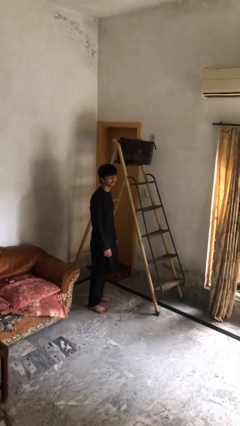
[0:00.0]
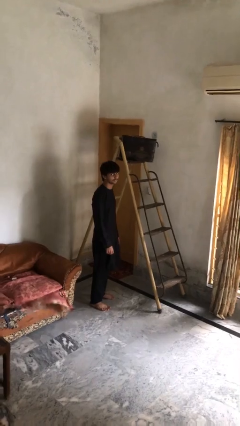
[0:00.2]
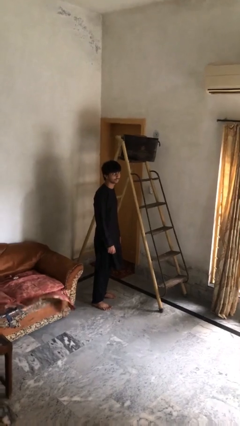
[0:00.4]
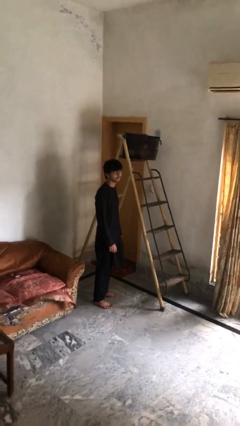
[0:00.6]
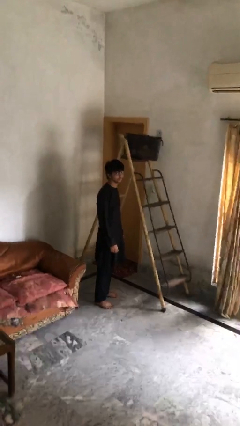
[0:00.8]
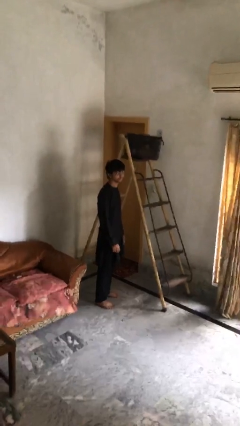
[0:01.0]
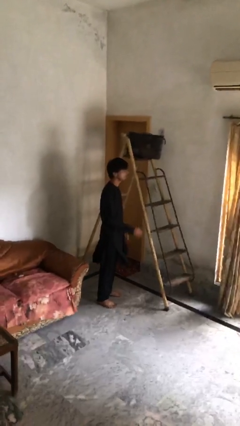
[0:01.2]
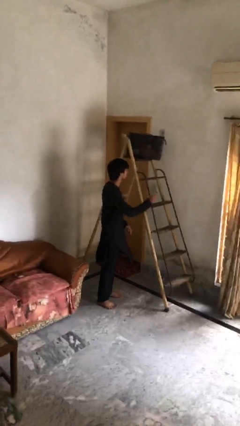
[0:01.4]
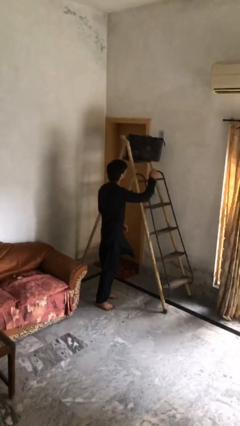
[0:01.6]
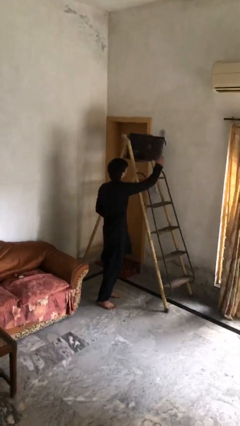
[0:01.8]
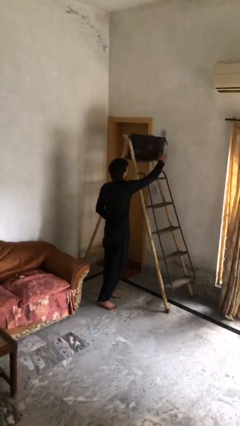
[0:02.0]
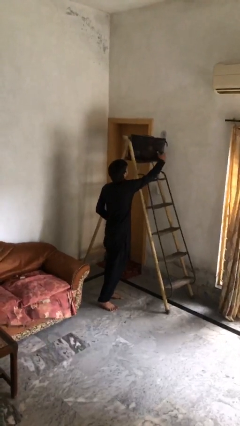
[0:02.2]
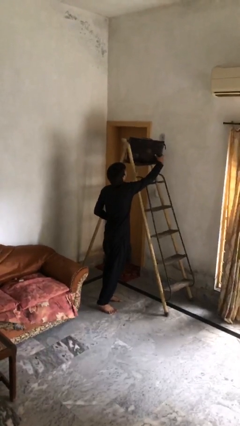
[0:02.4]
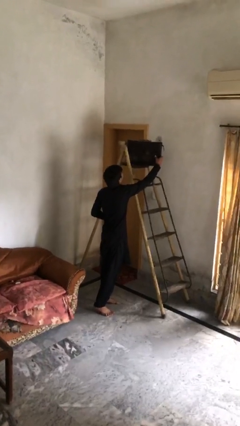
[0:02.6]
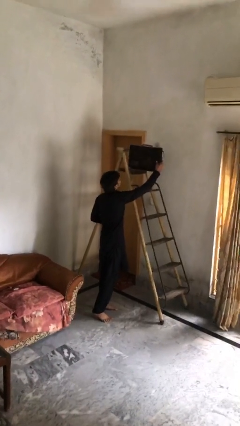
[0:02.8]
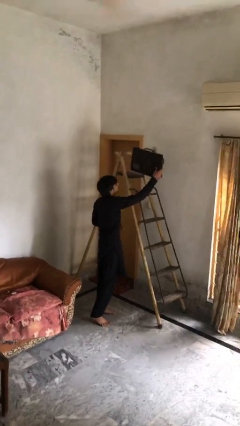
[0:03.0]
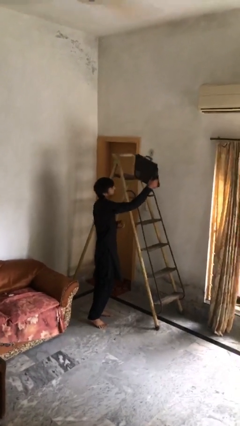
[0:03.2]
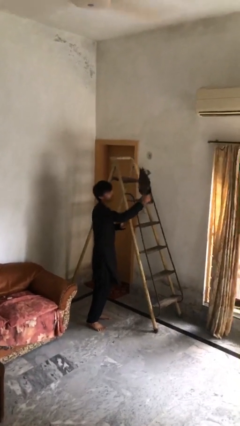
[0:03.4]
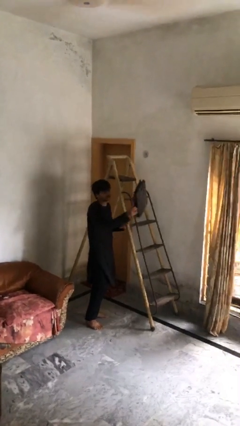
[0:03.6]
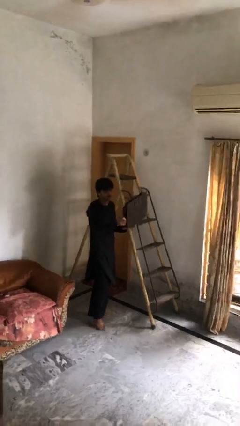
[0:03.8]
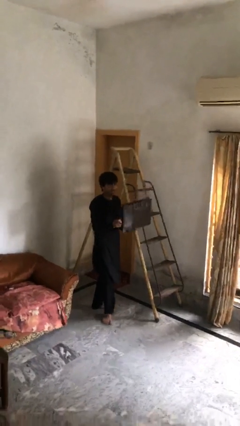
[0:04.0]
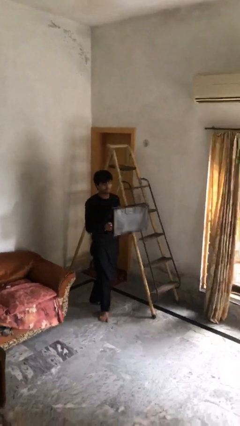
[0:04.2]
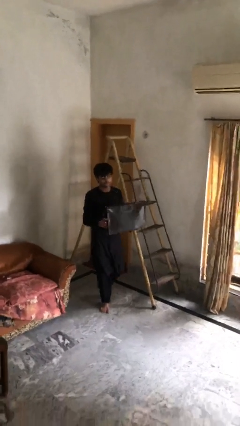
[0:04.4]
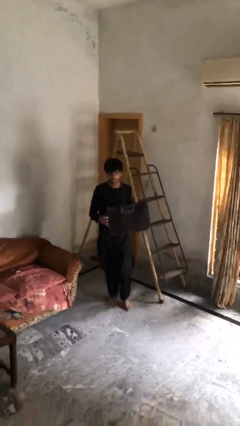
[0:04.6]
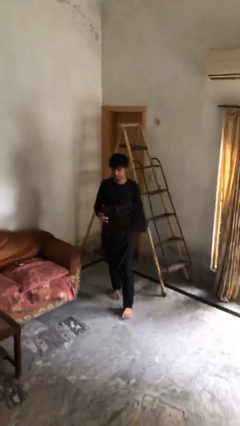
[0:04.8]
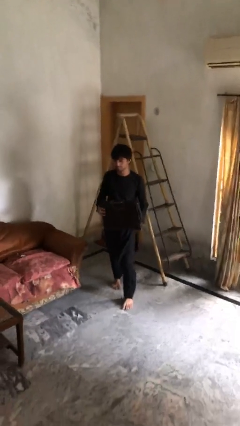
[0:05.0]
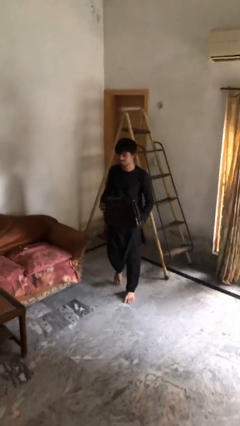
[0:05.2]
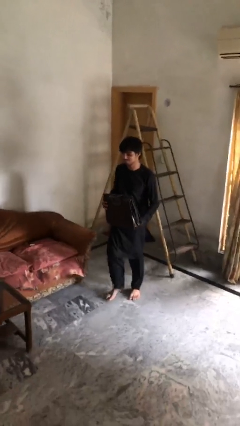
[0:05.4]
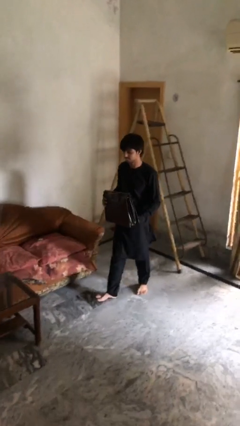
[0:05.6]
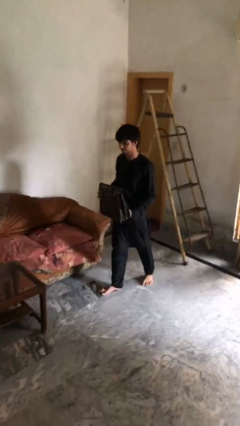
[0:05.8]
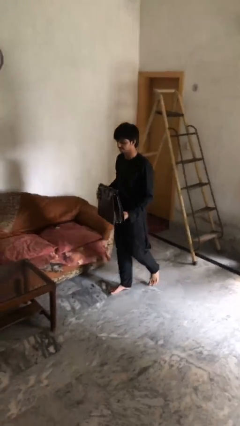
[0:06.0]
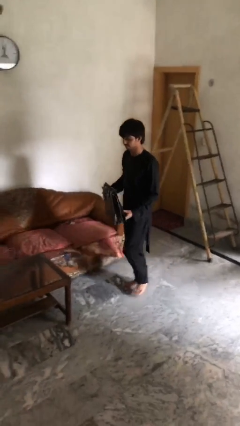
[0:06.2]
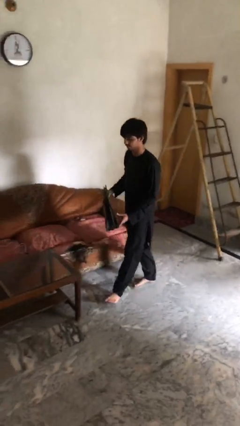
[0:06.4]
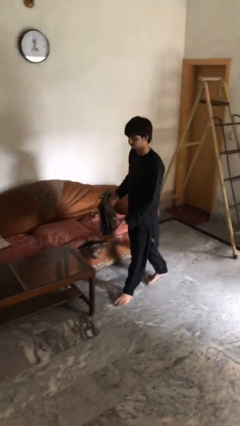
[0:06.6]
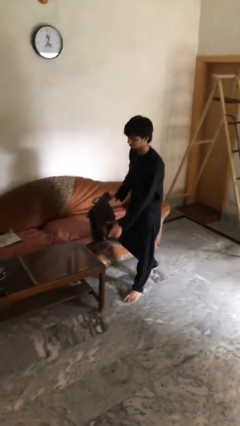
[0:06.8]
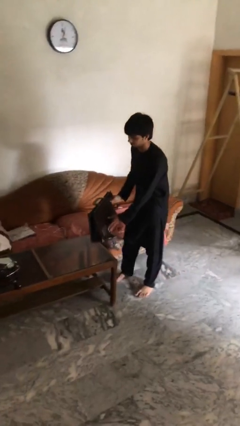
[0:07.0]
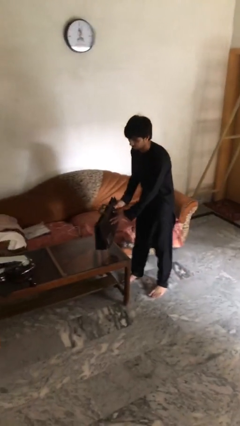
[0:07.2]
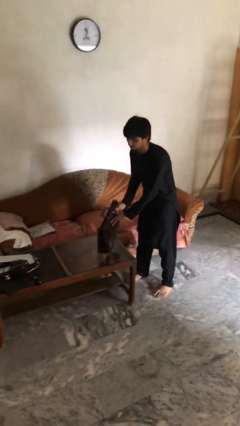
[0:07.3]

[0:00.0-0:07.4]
person picks up object from shelf

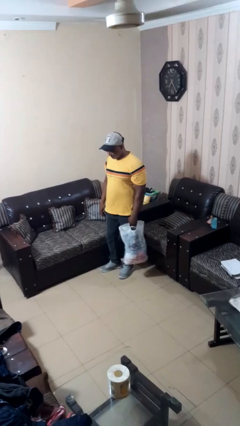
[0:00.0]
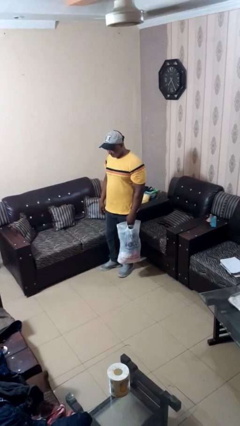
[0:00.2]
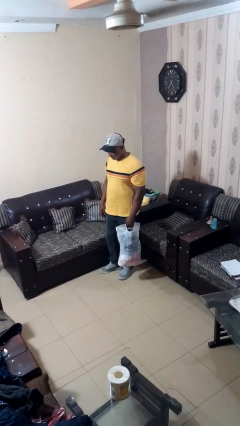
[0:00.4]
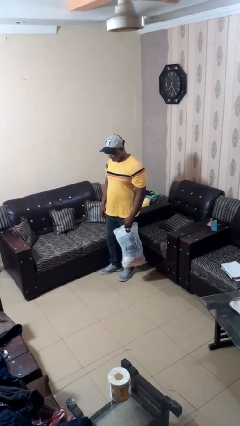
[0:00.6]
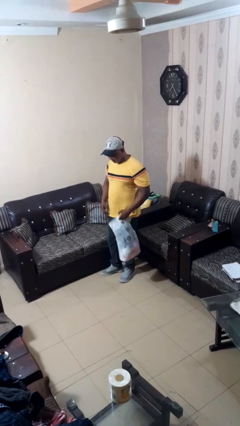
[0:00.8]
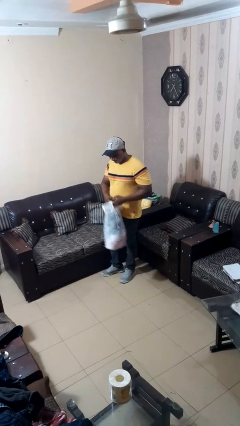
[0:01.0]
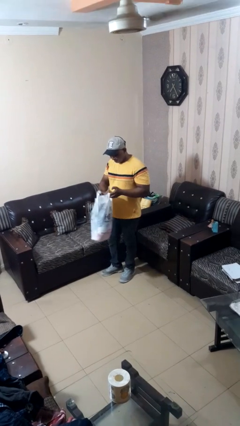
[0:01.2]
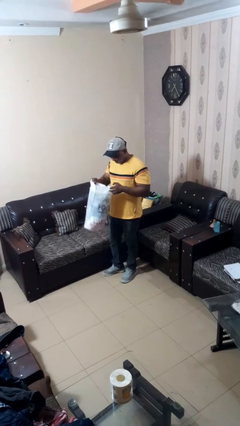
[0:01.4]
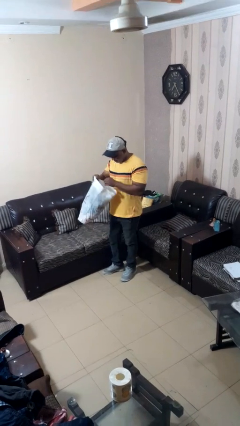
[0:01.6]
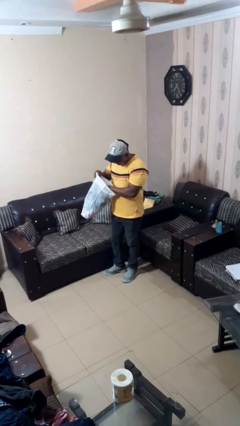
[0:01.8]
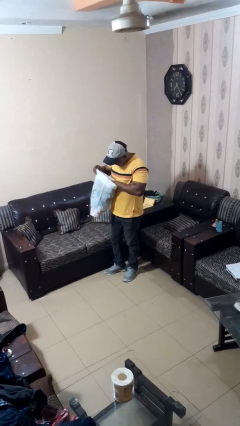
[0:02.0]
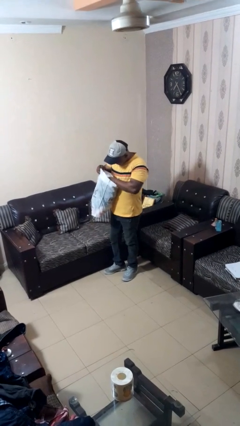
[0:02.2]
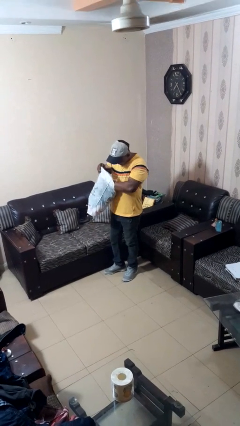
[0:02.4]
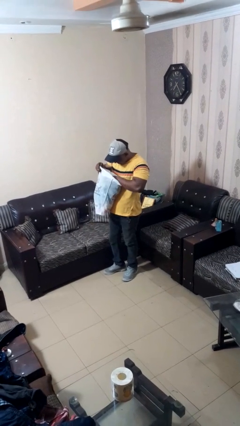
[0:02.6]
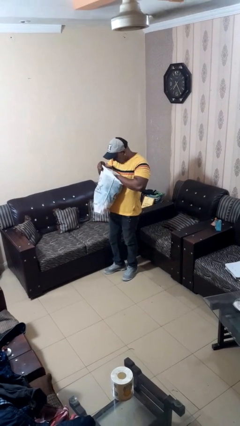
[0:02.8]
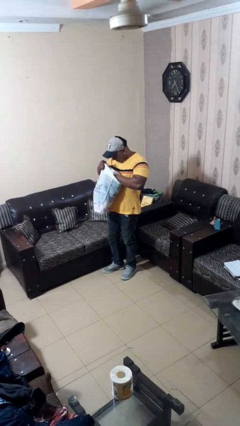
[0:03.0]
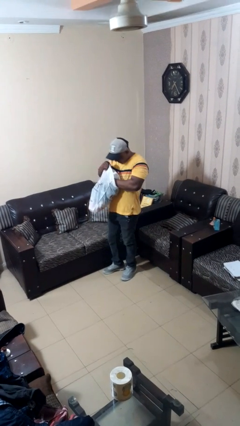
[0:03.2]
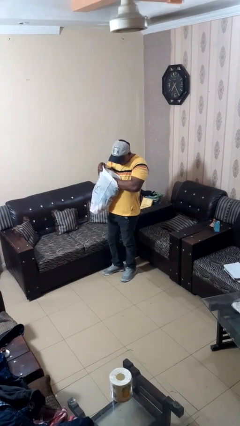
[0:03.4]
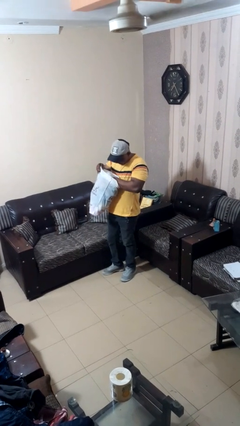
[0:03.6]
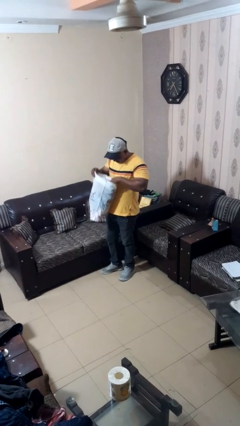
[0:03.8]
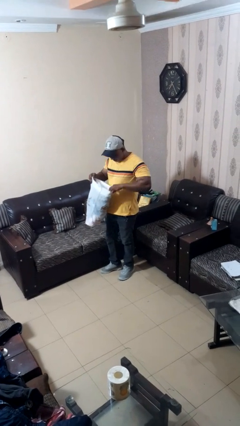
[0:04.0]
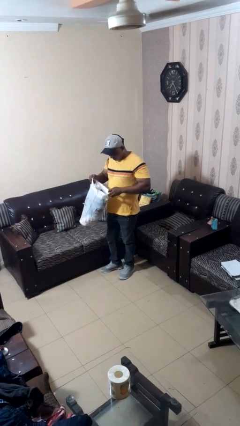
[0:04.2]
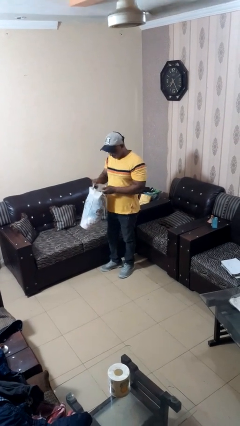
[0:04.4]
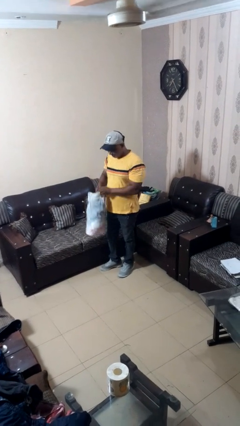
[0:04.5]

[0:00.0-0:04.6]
person searches in bag

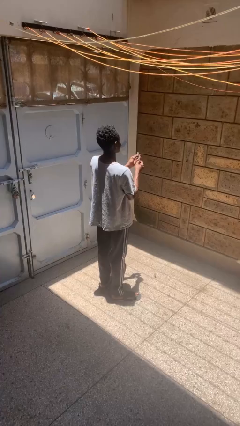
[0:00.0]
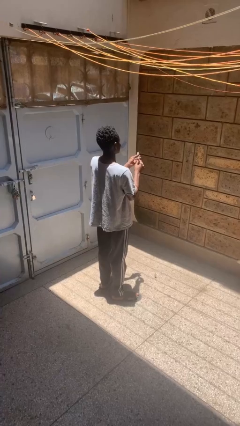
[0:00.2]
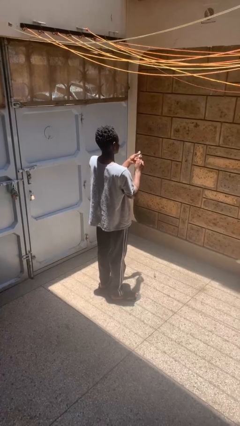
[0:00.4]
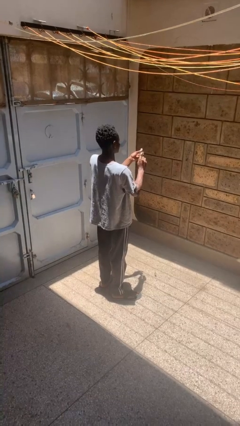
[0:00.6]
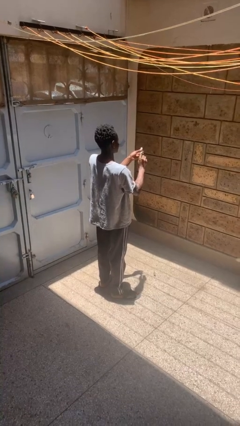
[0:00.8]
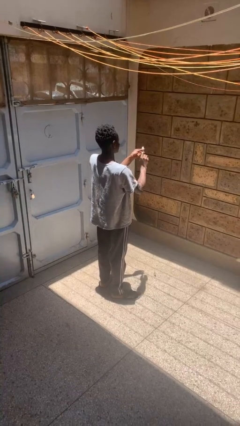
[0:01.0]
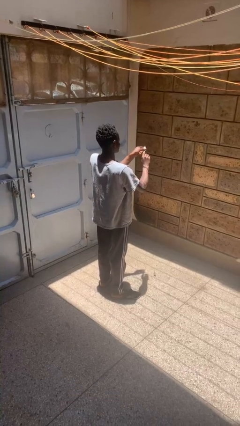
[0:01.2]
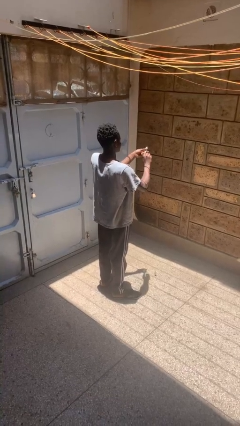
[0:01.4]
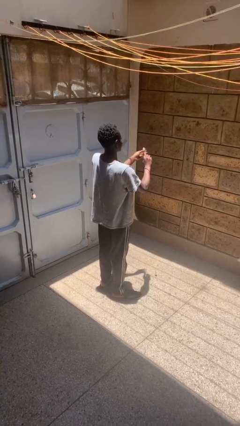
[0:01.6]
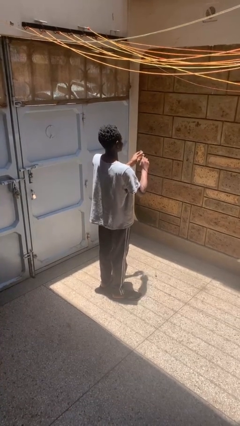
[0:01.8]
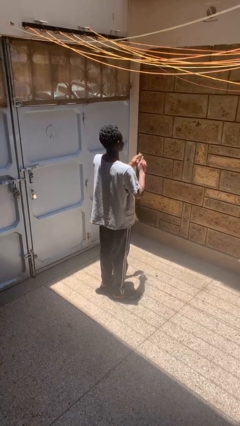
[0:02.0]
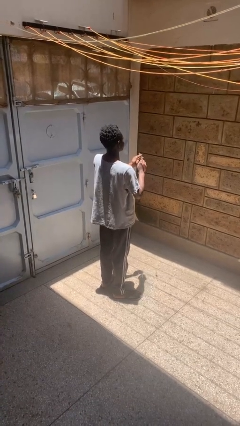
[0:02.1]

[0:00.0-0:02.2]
person clips fingernails

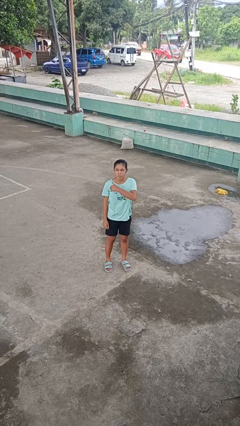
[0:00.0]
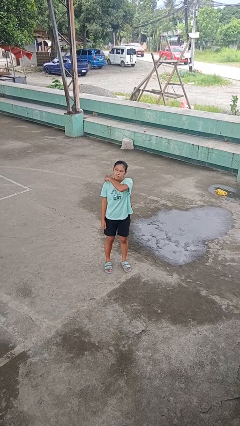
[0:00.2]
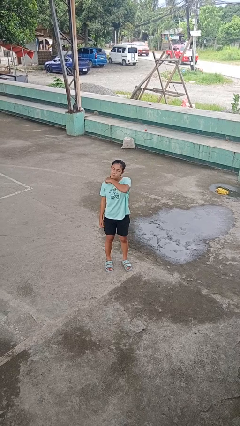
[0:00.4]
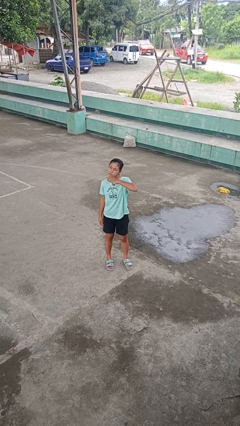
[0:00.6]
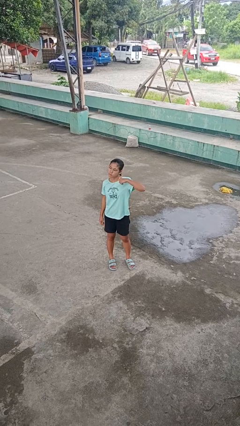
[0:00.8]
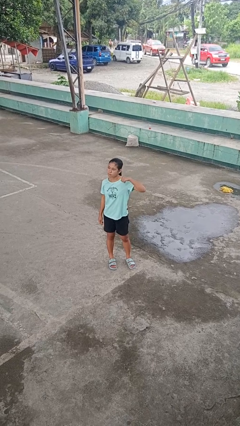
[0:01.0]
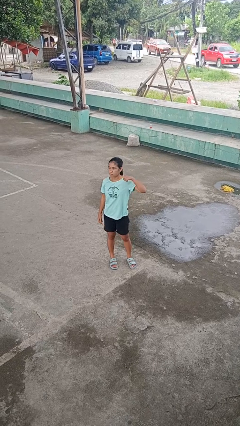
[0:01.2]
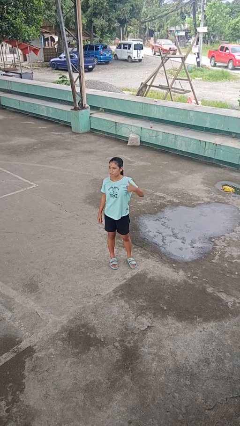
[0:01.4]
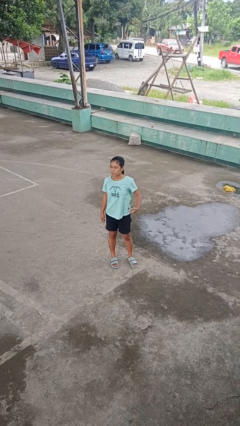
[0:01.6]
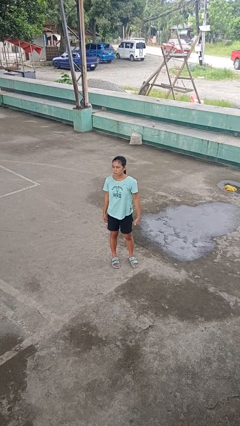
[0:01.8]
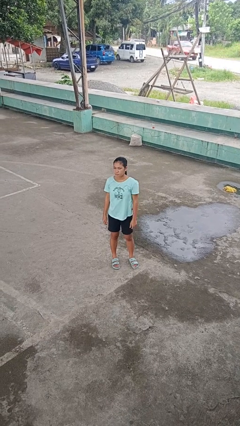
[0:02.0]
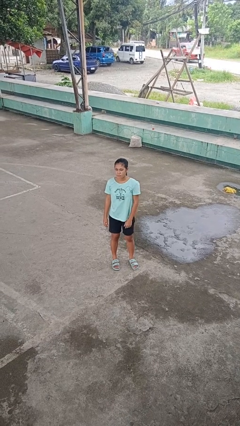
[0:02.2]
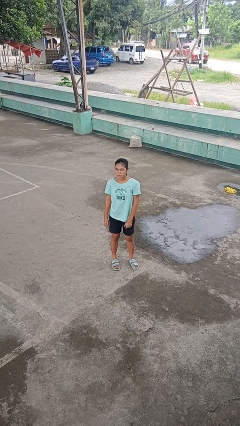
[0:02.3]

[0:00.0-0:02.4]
person gestures cut

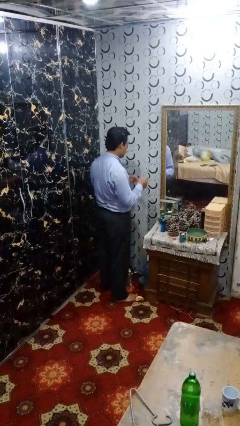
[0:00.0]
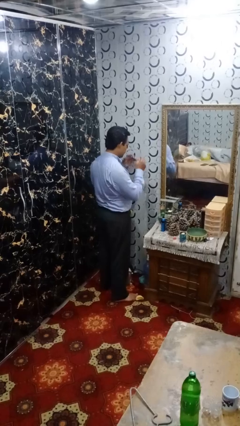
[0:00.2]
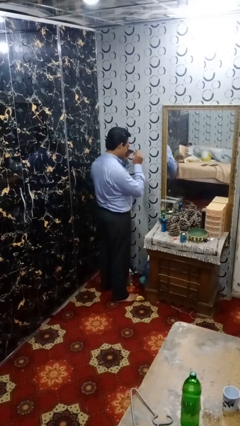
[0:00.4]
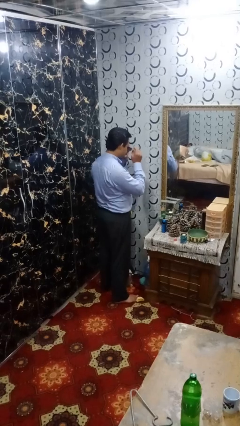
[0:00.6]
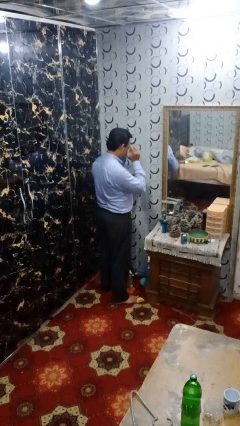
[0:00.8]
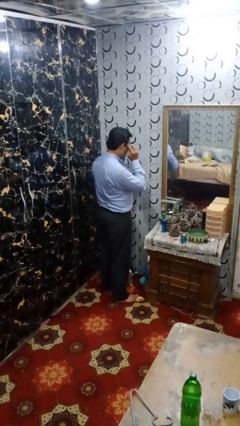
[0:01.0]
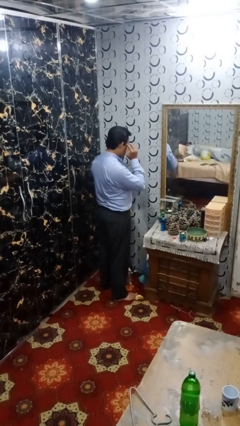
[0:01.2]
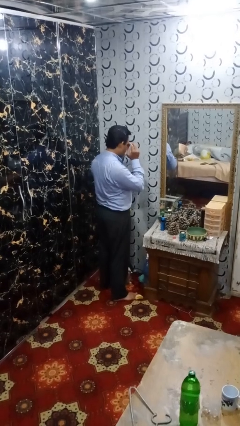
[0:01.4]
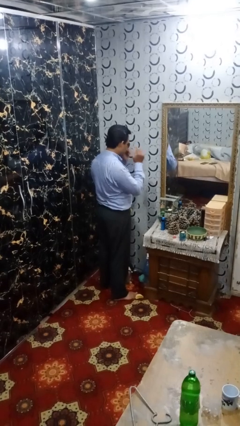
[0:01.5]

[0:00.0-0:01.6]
person puts on sunglasses
